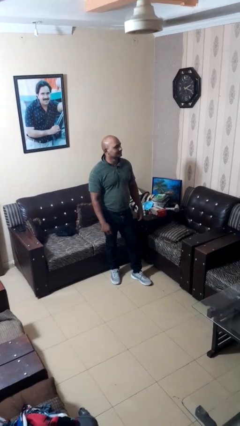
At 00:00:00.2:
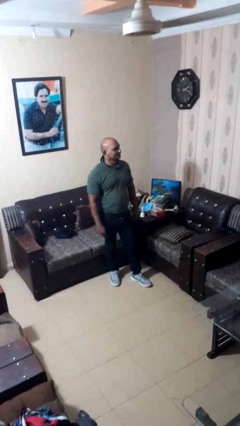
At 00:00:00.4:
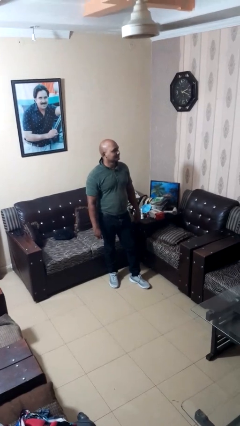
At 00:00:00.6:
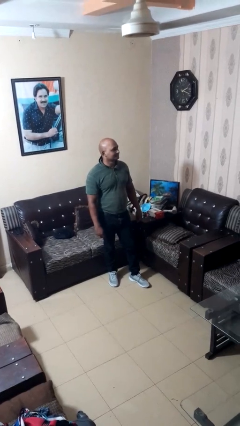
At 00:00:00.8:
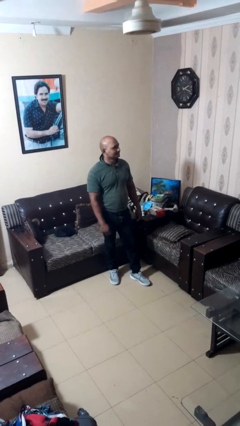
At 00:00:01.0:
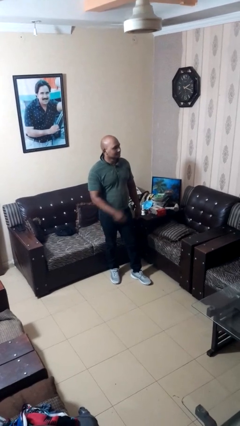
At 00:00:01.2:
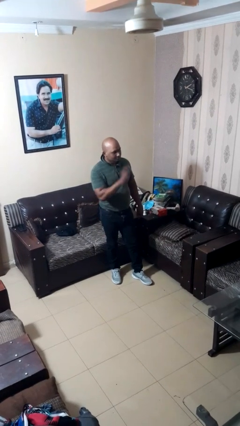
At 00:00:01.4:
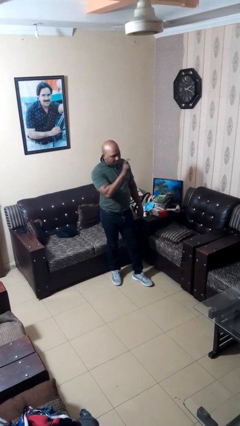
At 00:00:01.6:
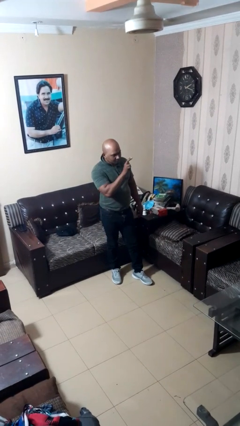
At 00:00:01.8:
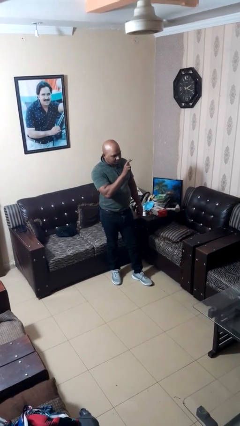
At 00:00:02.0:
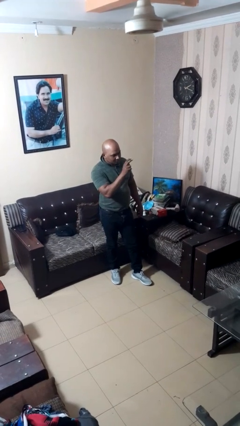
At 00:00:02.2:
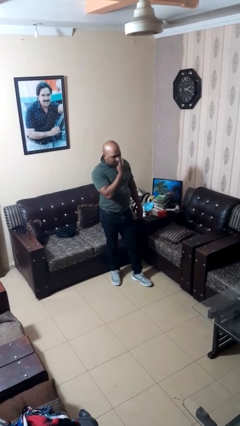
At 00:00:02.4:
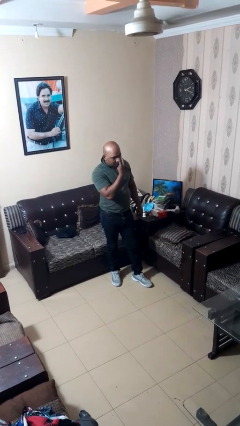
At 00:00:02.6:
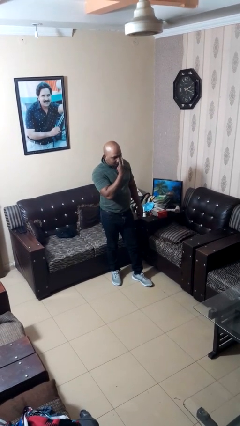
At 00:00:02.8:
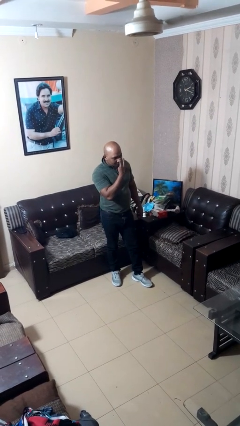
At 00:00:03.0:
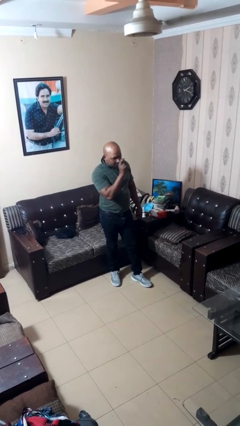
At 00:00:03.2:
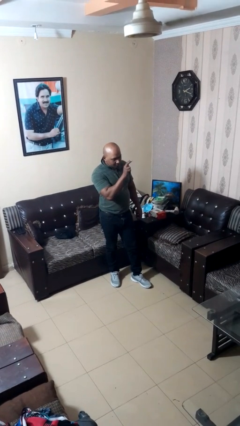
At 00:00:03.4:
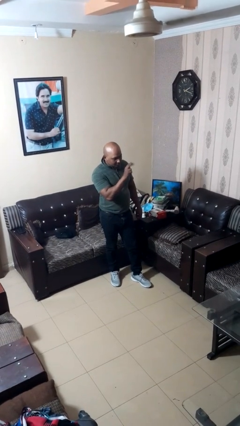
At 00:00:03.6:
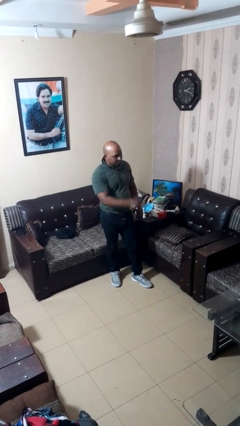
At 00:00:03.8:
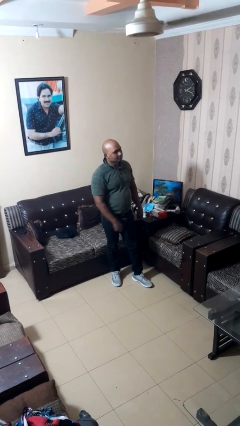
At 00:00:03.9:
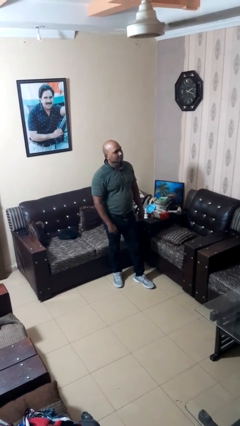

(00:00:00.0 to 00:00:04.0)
person gestures watch closely

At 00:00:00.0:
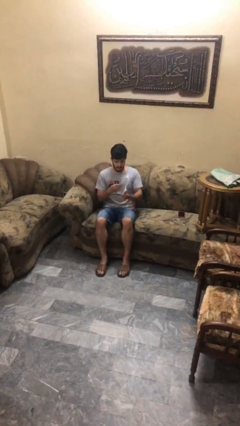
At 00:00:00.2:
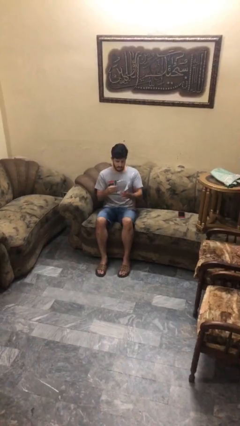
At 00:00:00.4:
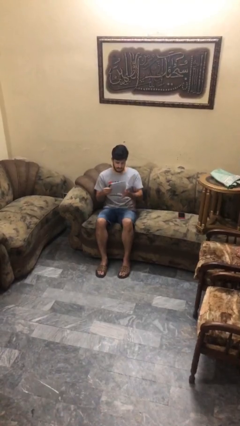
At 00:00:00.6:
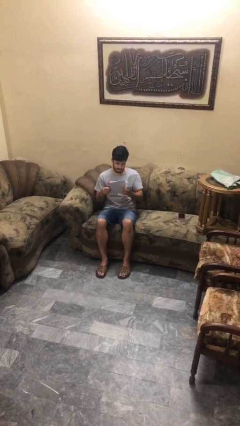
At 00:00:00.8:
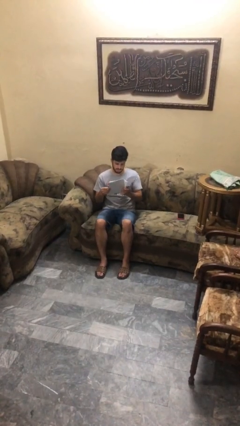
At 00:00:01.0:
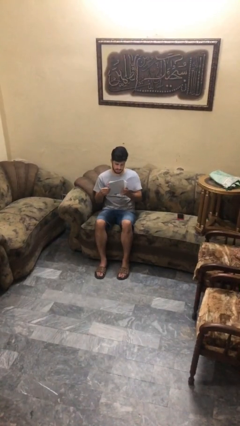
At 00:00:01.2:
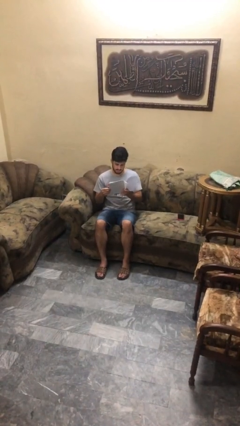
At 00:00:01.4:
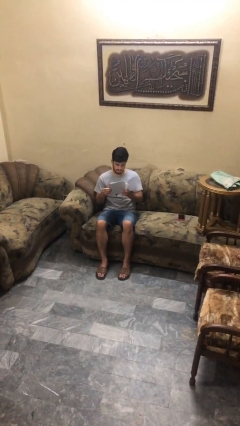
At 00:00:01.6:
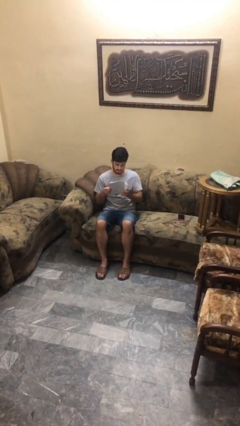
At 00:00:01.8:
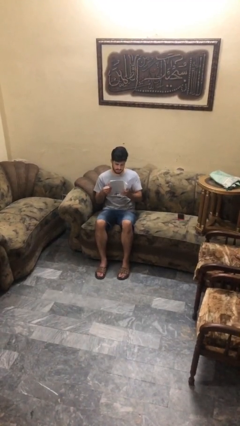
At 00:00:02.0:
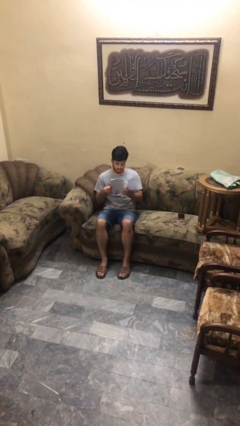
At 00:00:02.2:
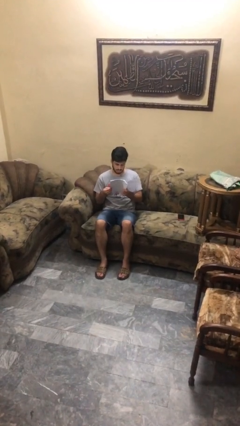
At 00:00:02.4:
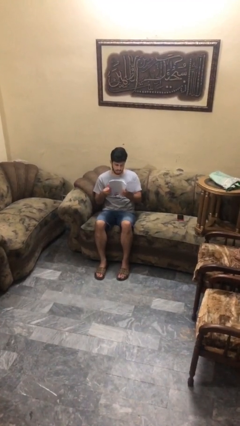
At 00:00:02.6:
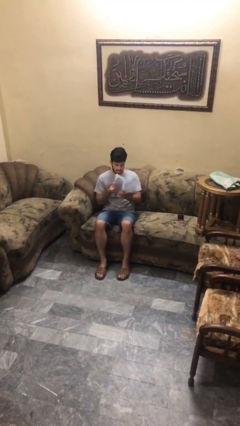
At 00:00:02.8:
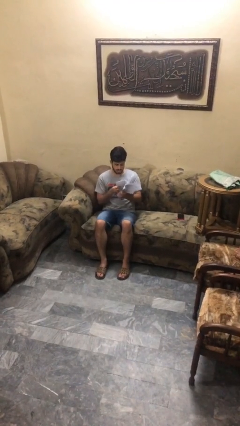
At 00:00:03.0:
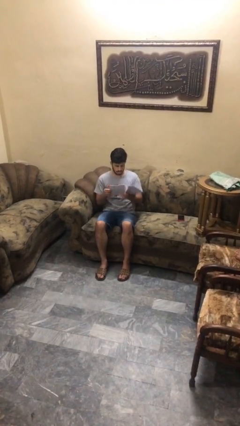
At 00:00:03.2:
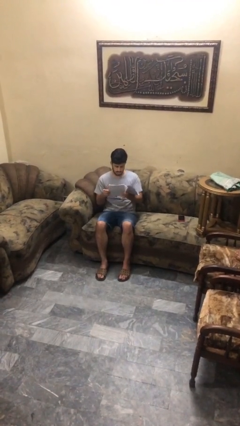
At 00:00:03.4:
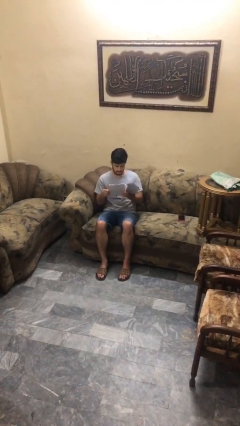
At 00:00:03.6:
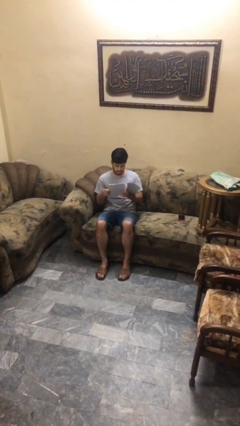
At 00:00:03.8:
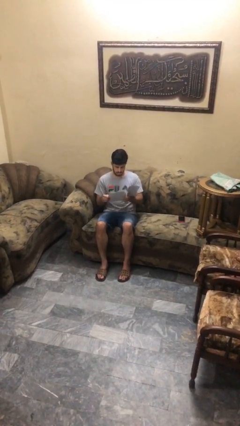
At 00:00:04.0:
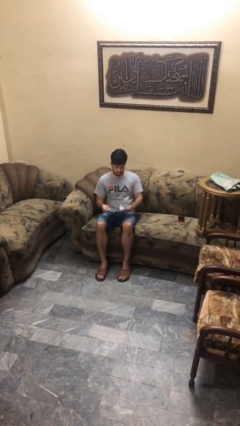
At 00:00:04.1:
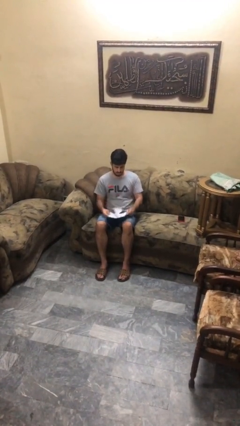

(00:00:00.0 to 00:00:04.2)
person reads magazine

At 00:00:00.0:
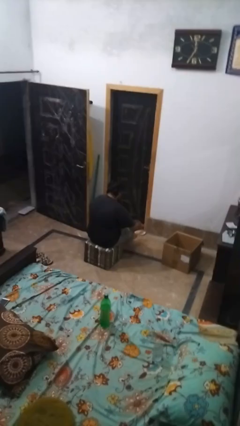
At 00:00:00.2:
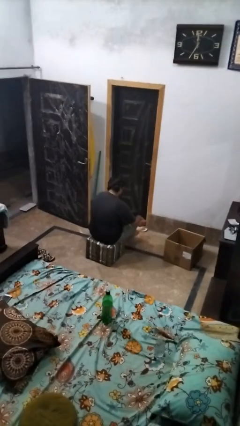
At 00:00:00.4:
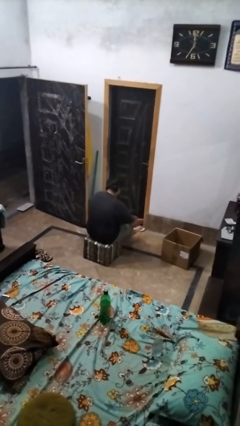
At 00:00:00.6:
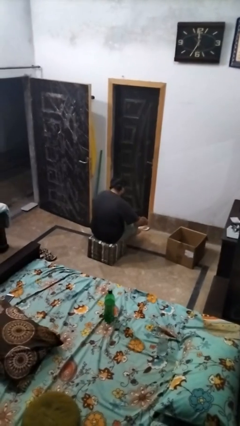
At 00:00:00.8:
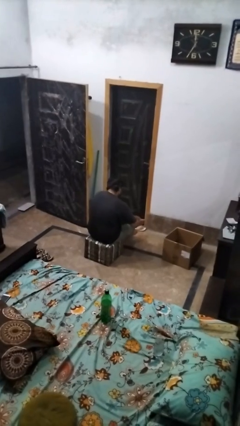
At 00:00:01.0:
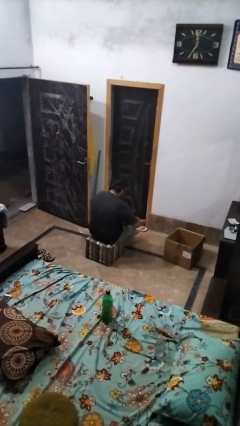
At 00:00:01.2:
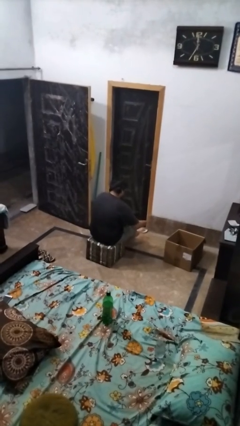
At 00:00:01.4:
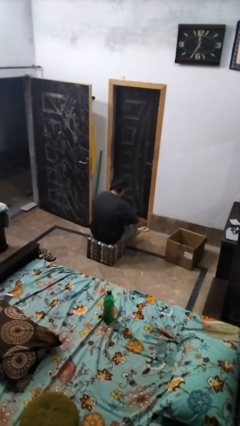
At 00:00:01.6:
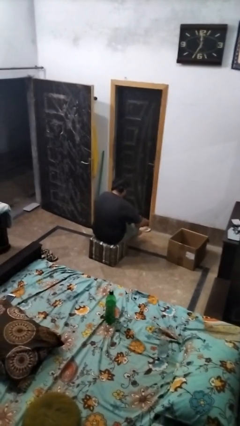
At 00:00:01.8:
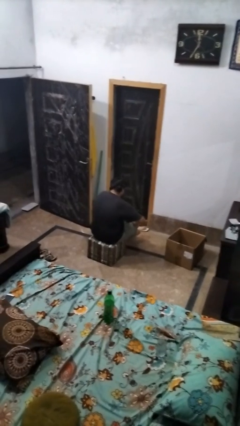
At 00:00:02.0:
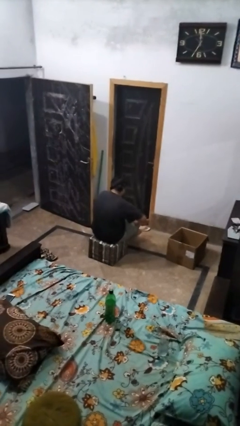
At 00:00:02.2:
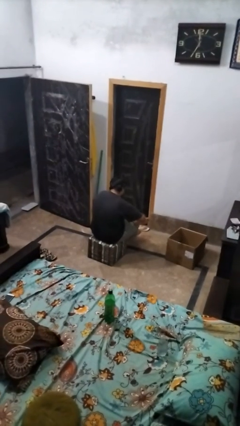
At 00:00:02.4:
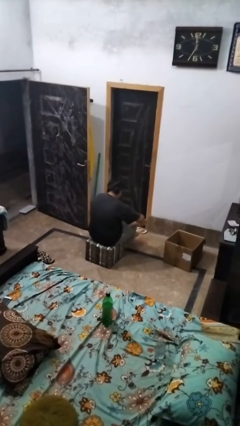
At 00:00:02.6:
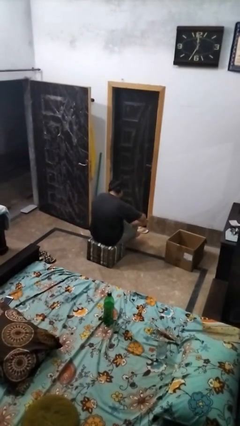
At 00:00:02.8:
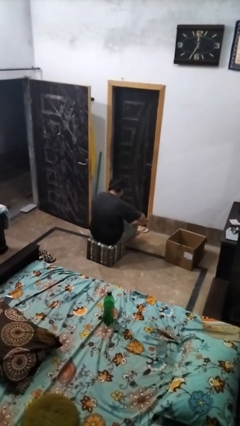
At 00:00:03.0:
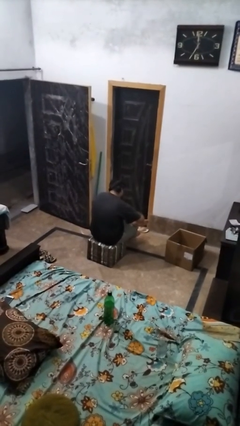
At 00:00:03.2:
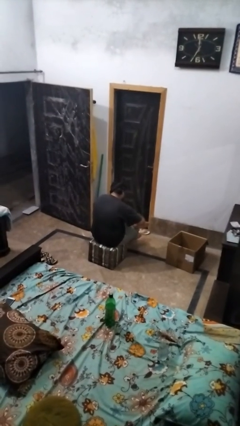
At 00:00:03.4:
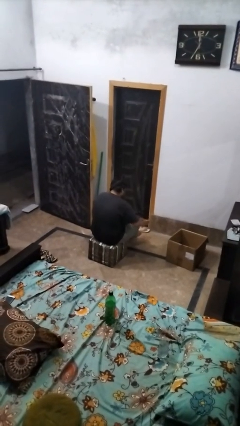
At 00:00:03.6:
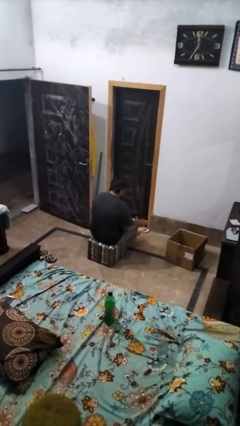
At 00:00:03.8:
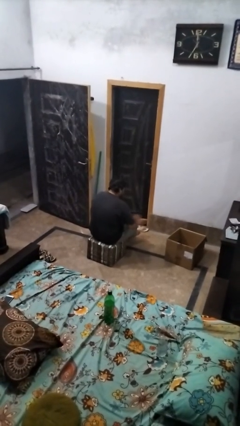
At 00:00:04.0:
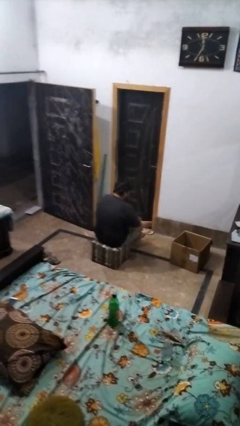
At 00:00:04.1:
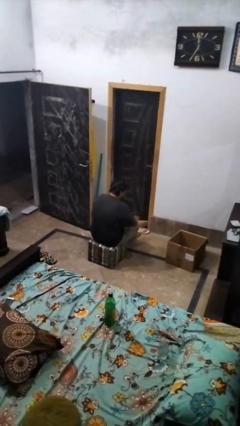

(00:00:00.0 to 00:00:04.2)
person rubs foot

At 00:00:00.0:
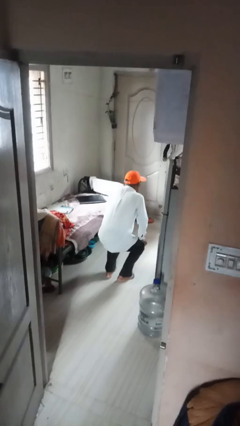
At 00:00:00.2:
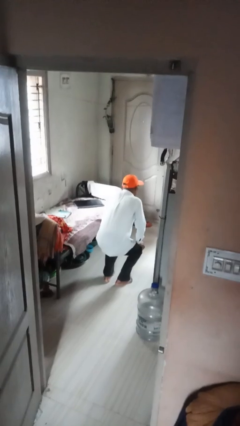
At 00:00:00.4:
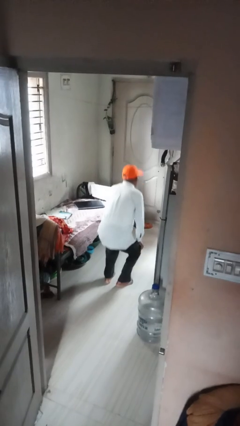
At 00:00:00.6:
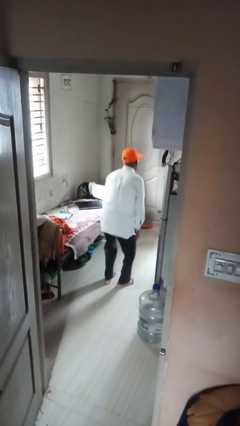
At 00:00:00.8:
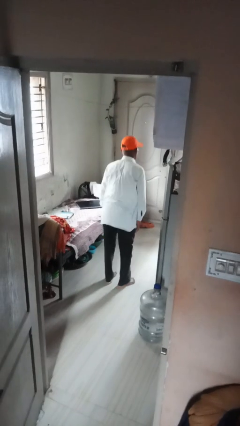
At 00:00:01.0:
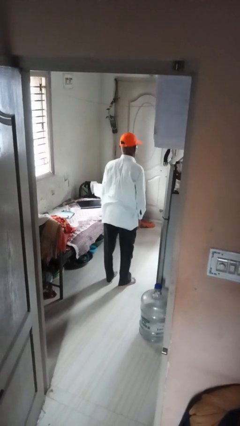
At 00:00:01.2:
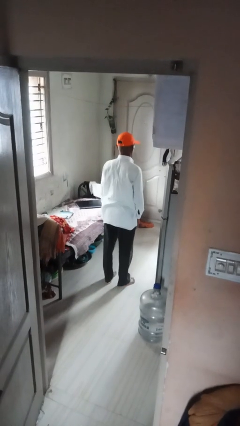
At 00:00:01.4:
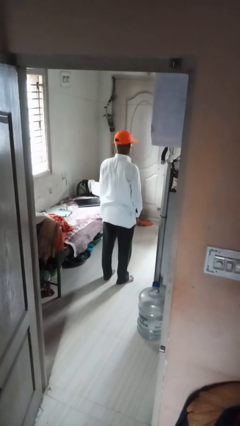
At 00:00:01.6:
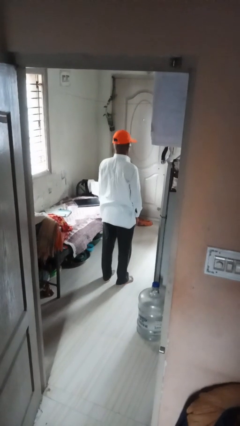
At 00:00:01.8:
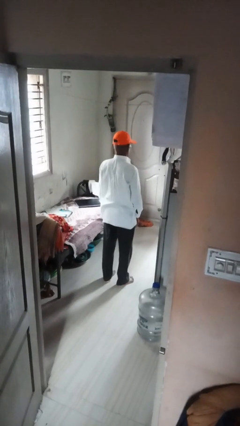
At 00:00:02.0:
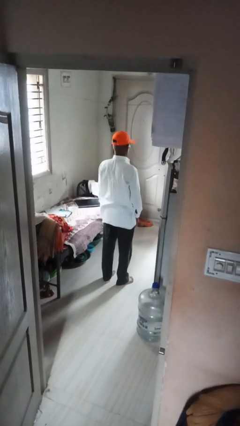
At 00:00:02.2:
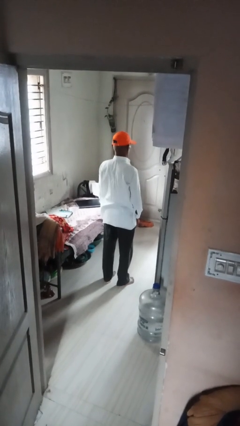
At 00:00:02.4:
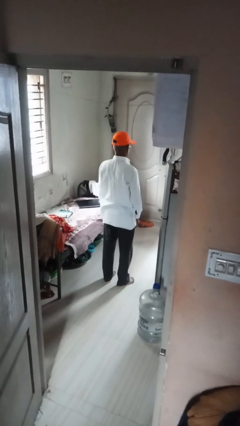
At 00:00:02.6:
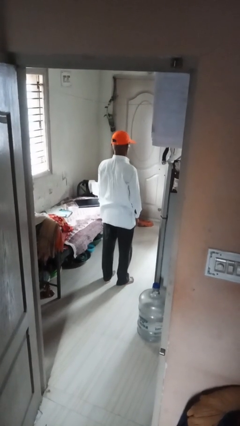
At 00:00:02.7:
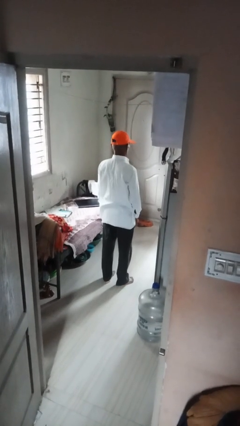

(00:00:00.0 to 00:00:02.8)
person stands up

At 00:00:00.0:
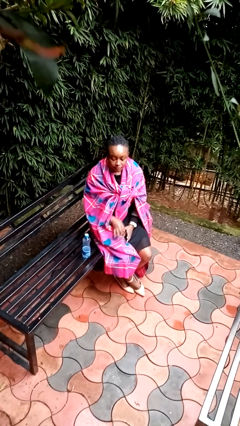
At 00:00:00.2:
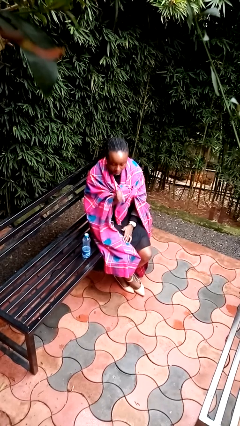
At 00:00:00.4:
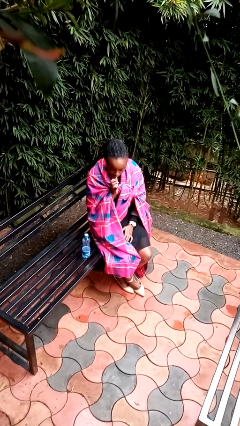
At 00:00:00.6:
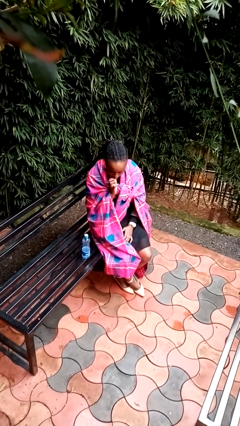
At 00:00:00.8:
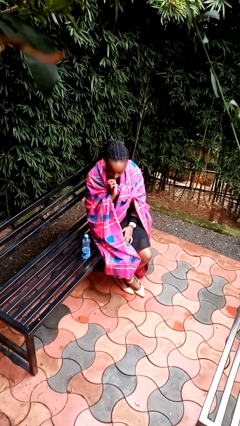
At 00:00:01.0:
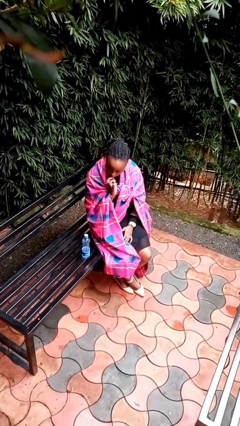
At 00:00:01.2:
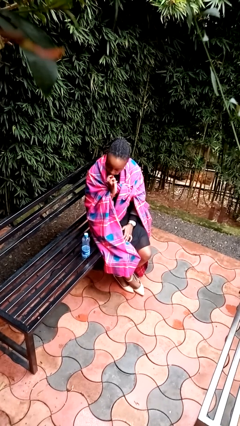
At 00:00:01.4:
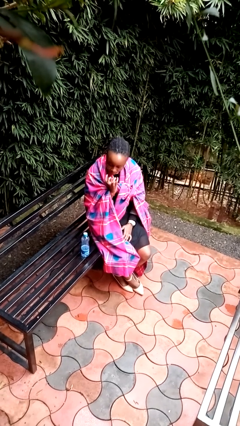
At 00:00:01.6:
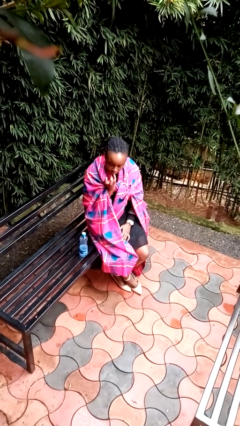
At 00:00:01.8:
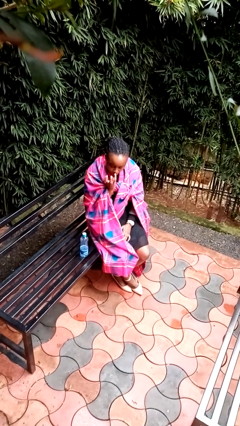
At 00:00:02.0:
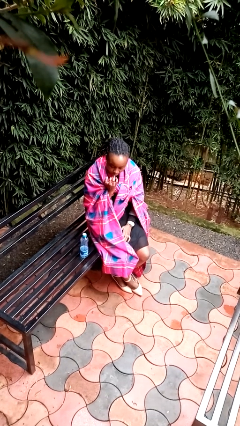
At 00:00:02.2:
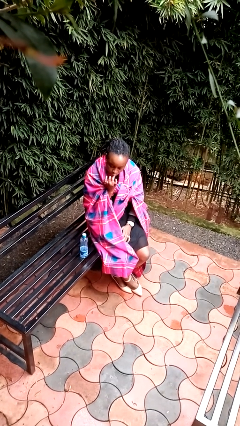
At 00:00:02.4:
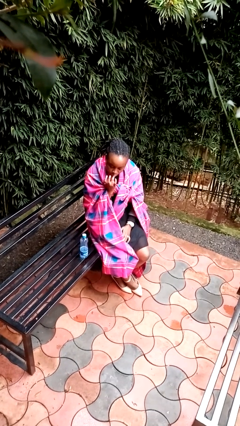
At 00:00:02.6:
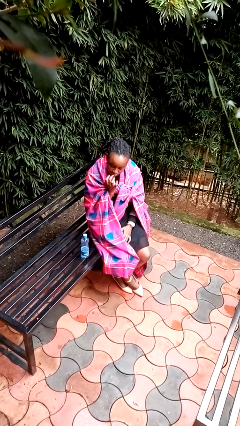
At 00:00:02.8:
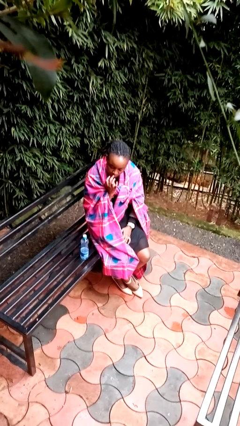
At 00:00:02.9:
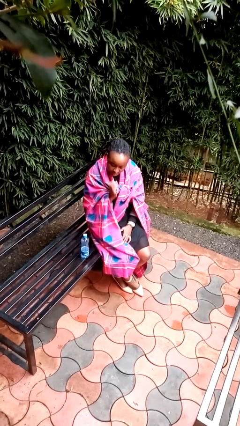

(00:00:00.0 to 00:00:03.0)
person licks fingers
